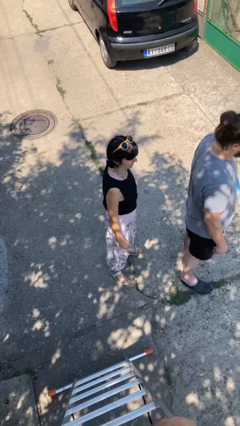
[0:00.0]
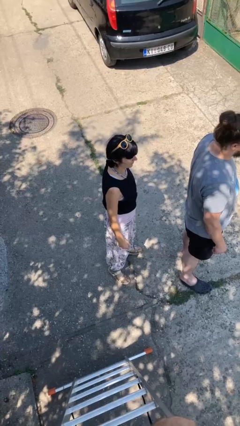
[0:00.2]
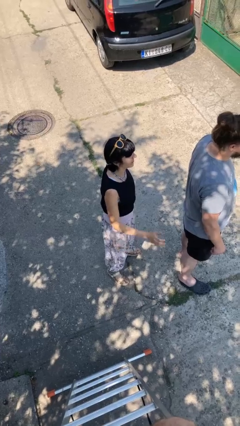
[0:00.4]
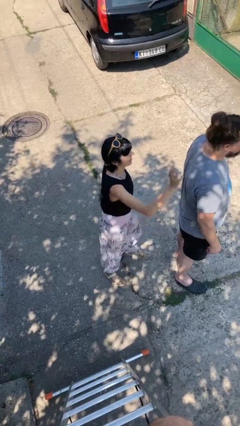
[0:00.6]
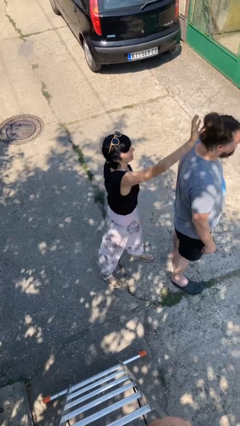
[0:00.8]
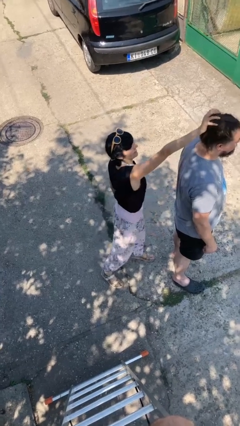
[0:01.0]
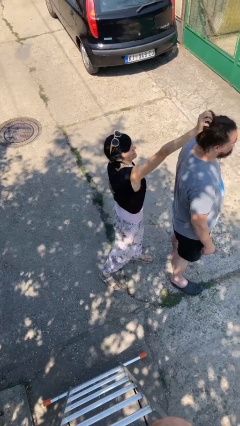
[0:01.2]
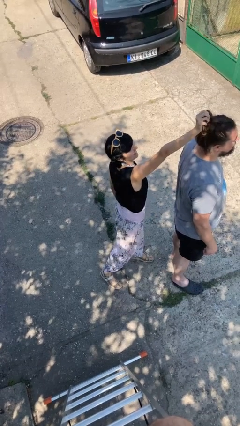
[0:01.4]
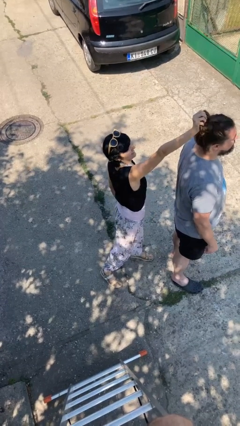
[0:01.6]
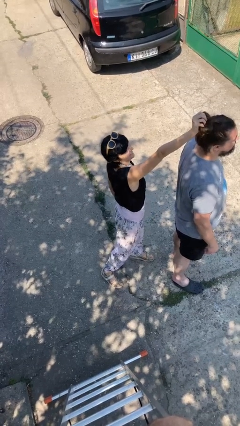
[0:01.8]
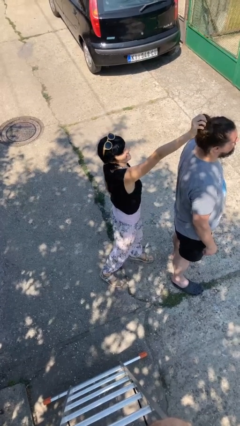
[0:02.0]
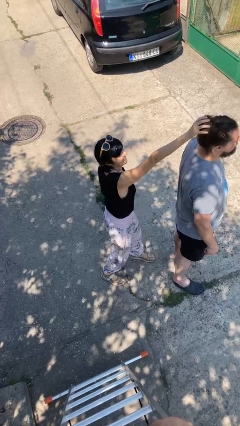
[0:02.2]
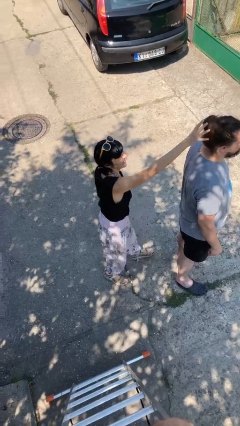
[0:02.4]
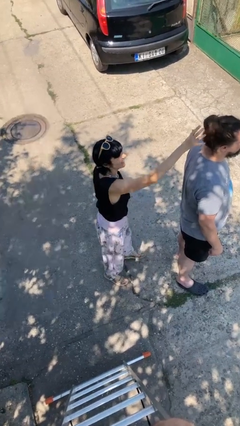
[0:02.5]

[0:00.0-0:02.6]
person grabs person by hair

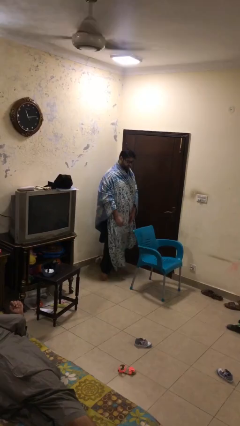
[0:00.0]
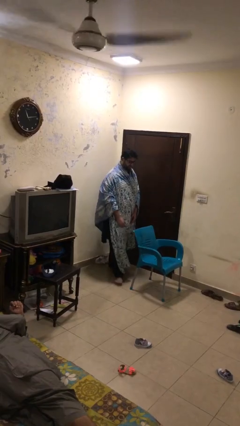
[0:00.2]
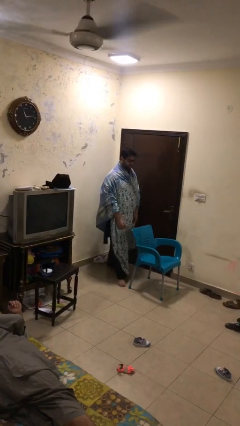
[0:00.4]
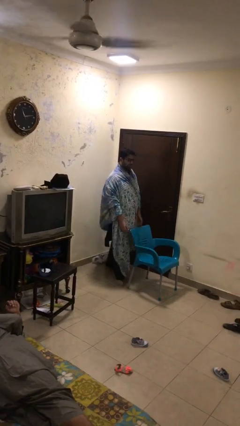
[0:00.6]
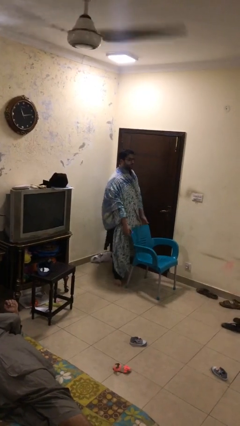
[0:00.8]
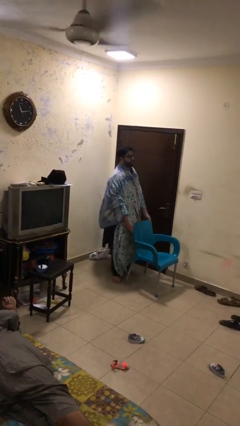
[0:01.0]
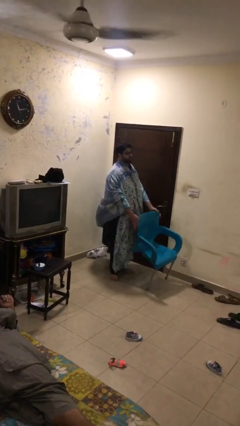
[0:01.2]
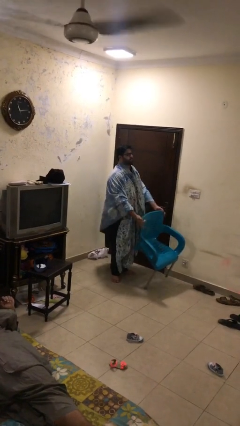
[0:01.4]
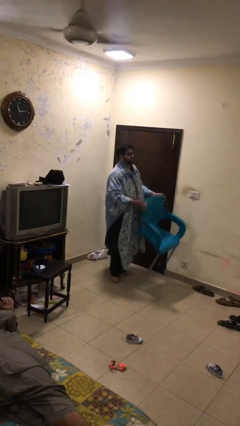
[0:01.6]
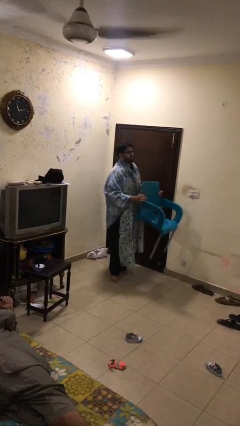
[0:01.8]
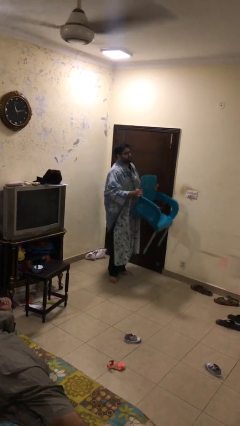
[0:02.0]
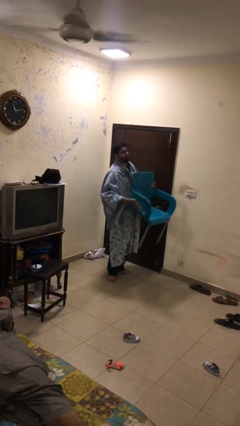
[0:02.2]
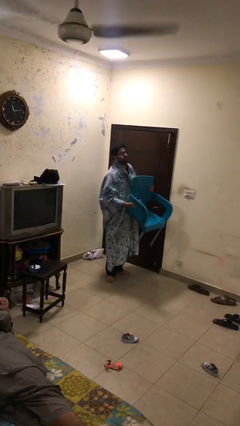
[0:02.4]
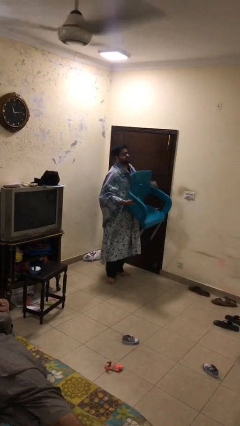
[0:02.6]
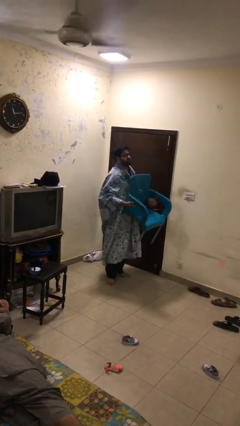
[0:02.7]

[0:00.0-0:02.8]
person picks up object from floor

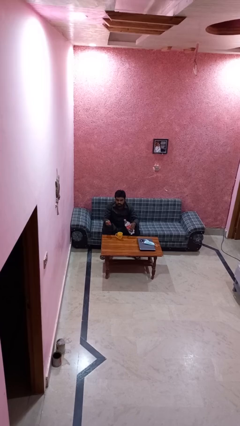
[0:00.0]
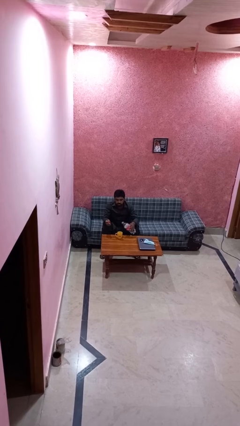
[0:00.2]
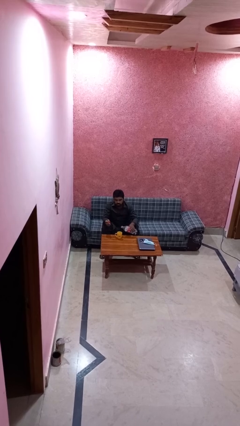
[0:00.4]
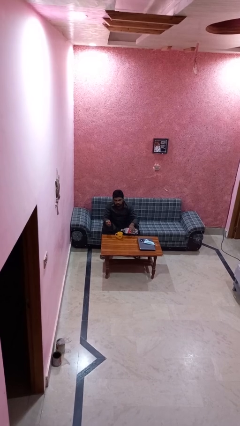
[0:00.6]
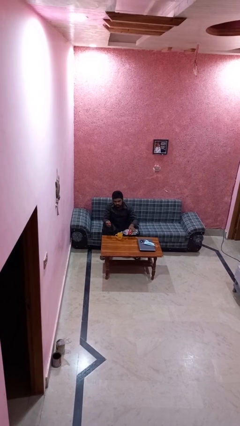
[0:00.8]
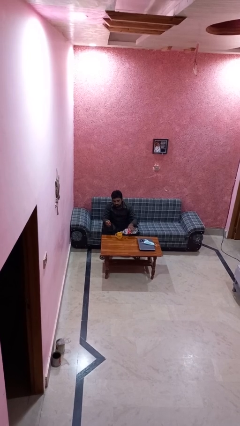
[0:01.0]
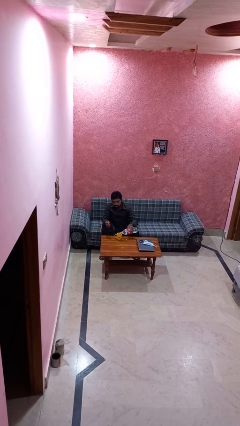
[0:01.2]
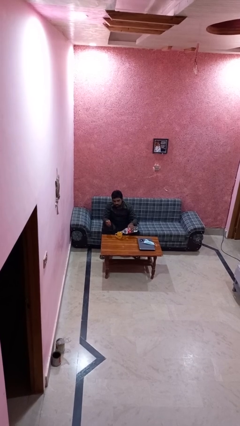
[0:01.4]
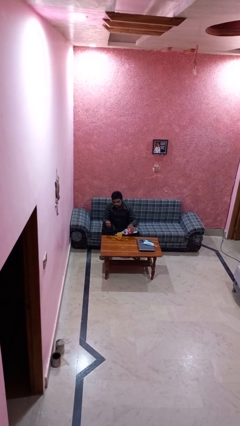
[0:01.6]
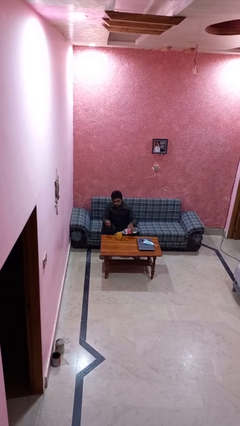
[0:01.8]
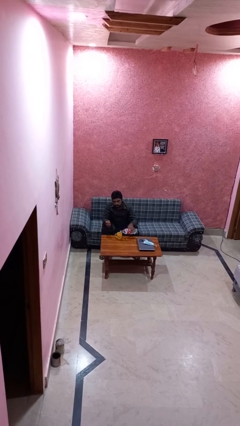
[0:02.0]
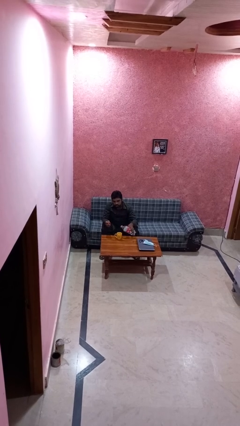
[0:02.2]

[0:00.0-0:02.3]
person pours liquid into cup

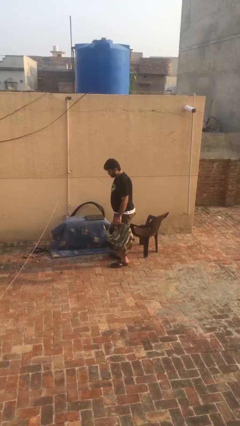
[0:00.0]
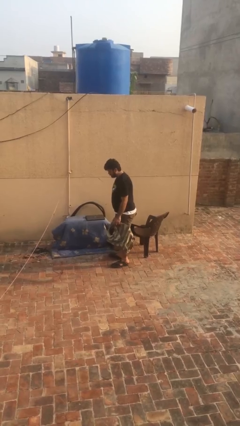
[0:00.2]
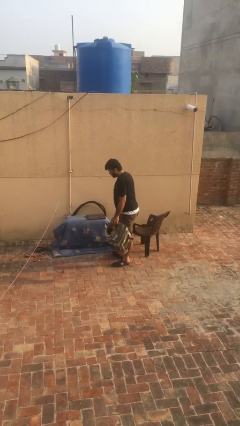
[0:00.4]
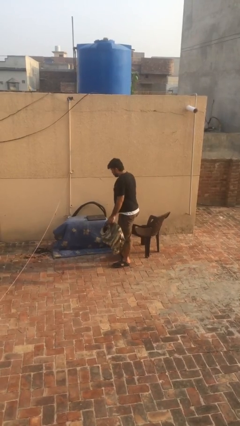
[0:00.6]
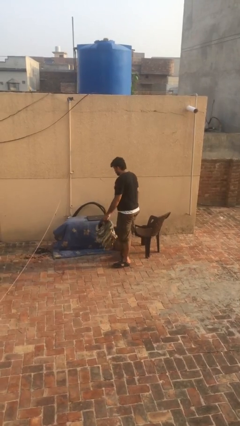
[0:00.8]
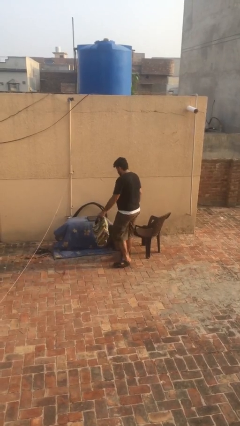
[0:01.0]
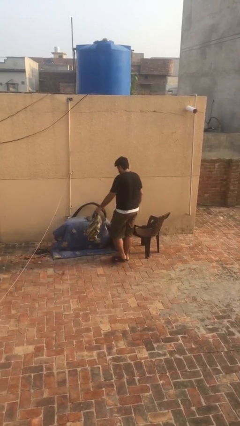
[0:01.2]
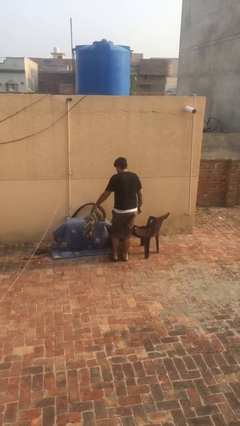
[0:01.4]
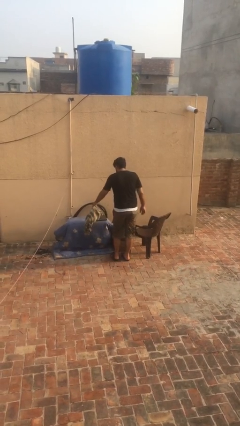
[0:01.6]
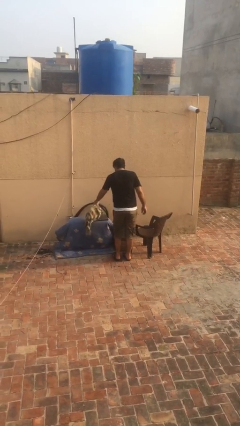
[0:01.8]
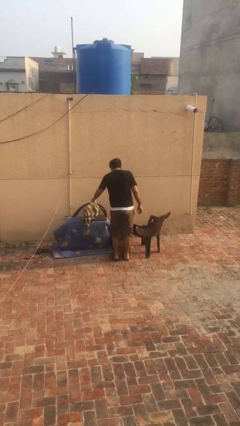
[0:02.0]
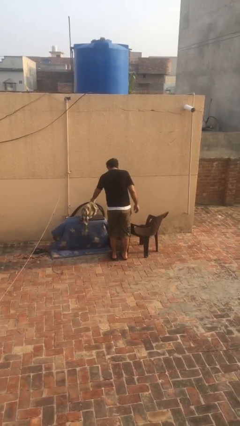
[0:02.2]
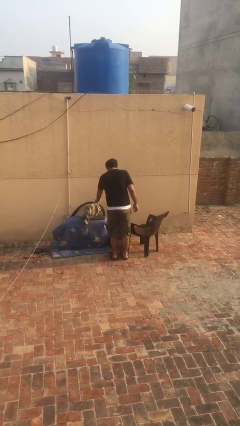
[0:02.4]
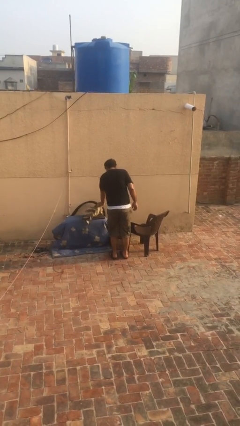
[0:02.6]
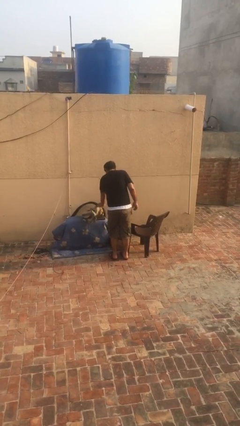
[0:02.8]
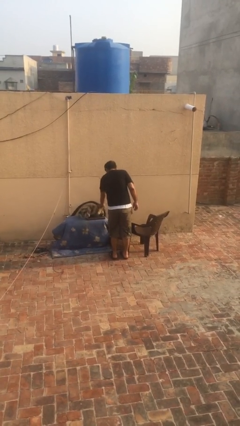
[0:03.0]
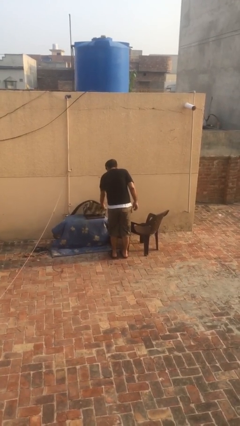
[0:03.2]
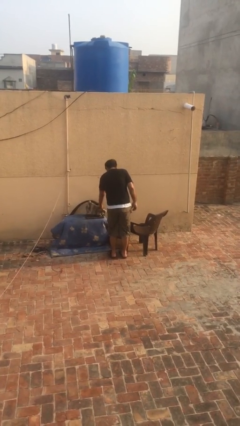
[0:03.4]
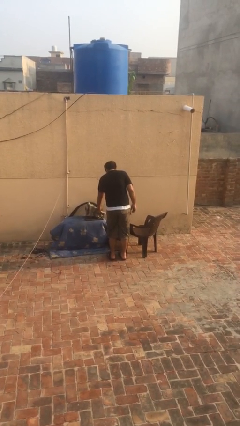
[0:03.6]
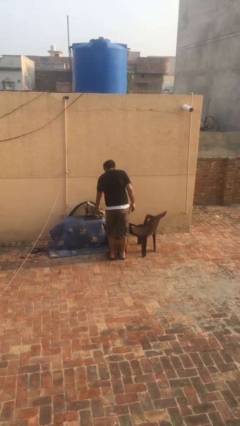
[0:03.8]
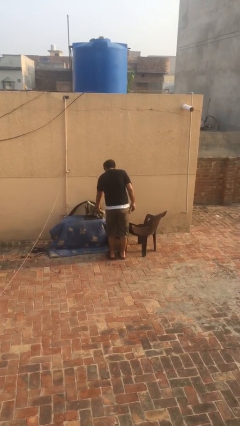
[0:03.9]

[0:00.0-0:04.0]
person puts down object on table

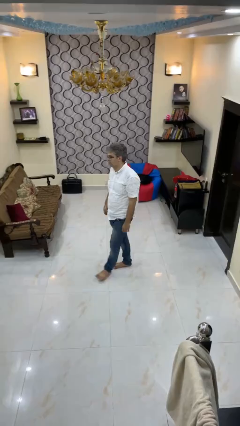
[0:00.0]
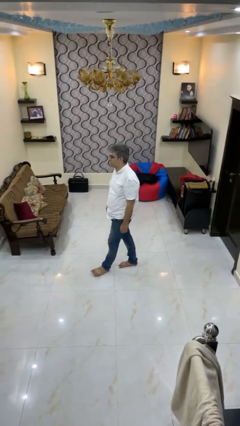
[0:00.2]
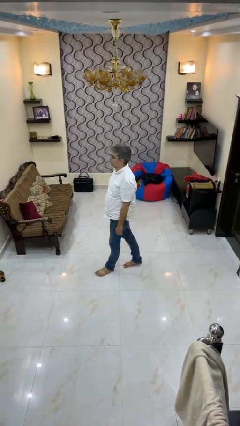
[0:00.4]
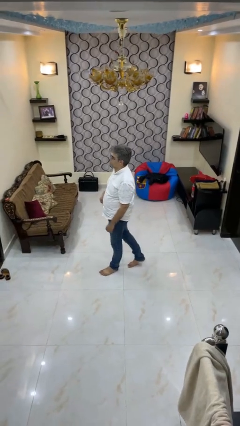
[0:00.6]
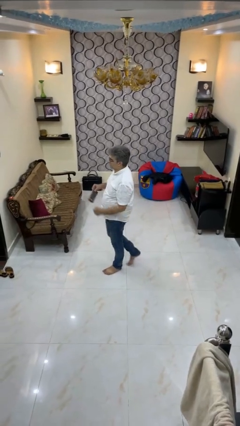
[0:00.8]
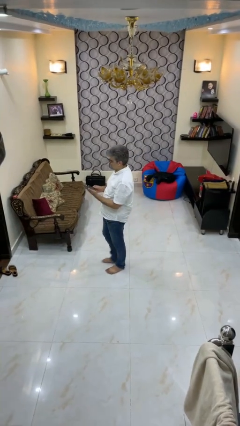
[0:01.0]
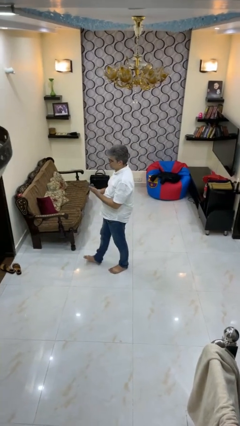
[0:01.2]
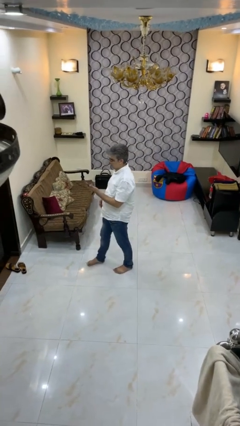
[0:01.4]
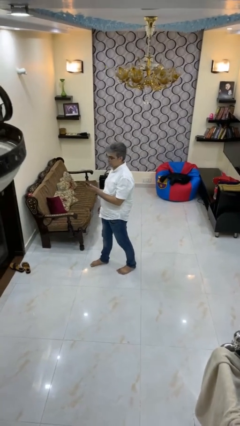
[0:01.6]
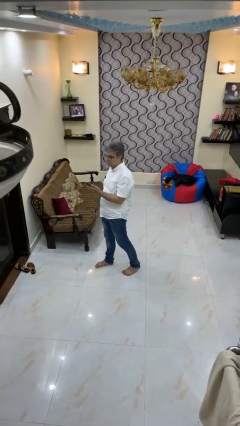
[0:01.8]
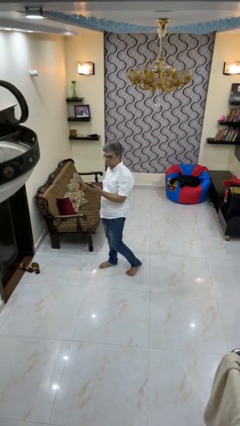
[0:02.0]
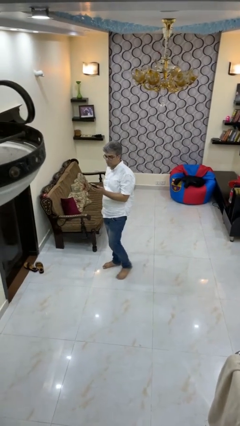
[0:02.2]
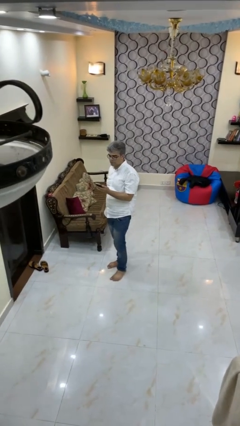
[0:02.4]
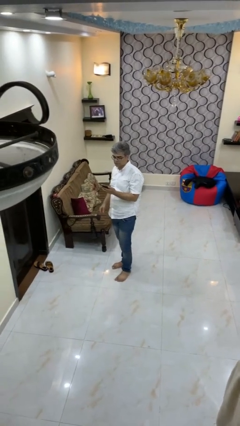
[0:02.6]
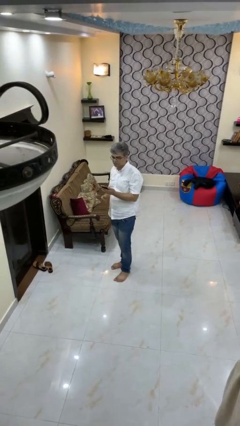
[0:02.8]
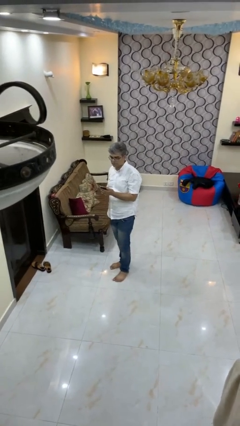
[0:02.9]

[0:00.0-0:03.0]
person takes phone from pocket

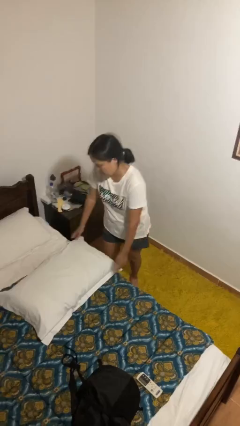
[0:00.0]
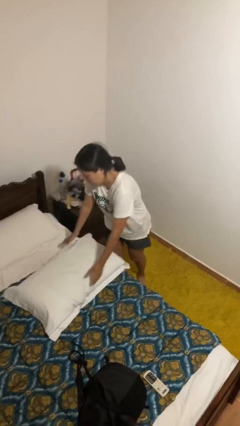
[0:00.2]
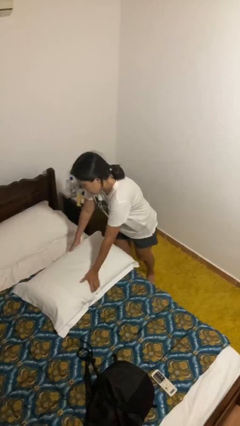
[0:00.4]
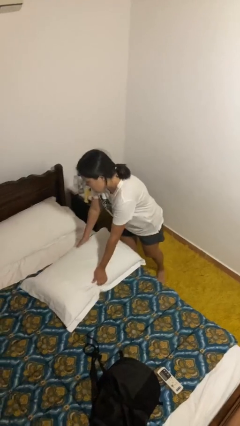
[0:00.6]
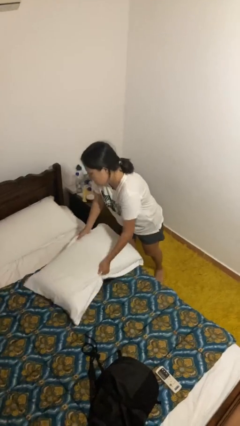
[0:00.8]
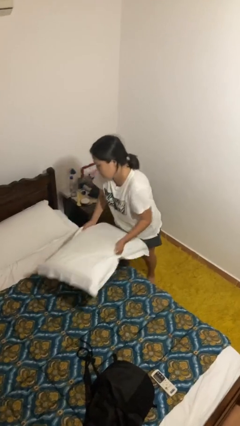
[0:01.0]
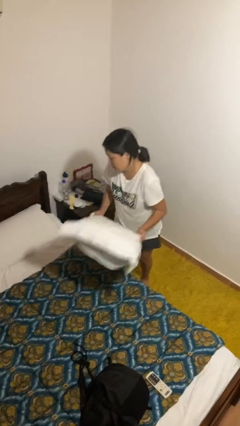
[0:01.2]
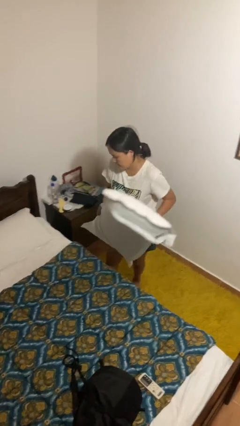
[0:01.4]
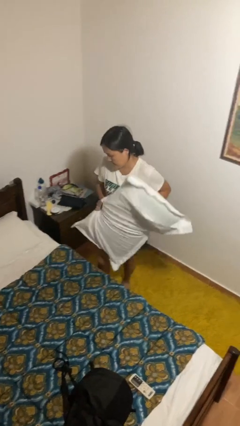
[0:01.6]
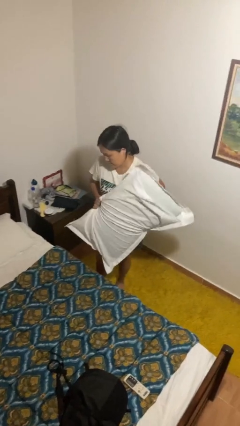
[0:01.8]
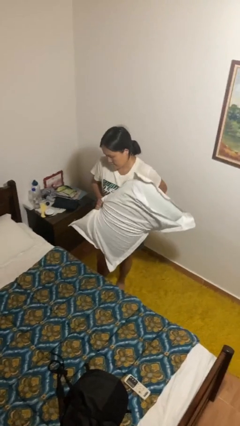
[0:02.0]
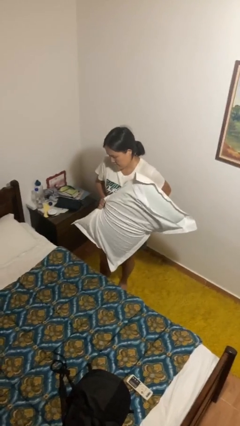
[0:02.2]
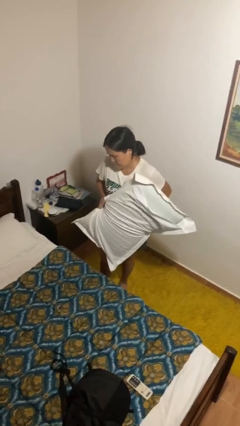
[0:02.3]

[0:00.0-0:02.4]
person picks up object from bed

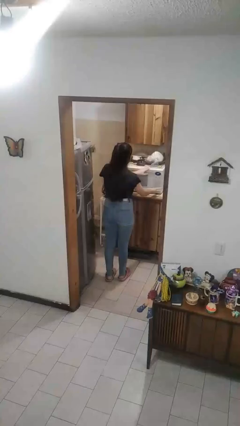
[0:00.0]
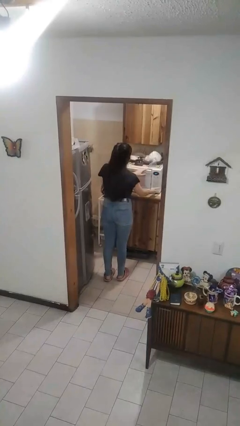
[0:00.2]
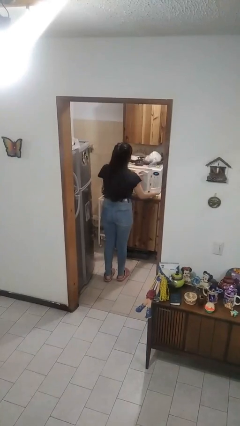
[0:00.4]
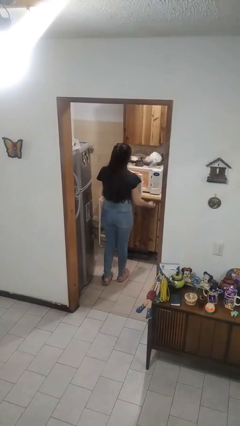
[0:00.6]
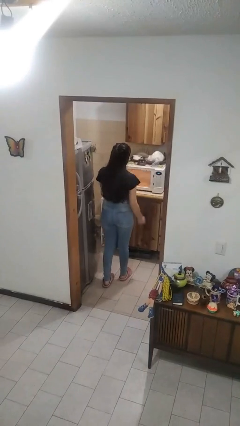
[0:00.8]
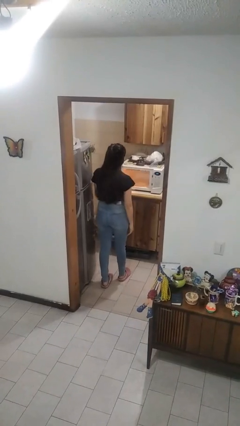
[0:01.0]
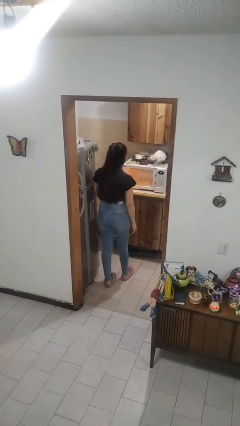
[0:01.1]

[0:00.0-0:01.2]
person opens microwave
